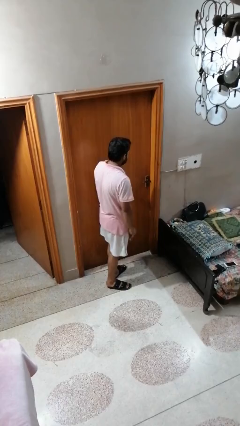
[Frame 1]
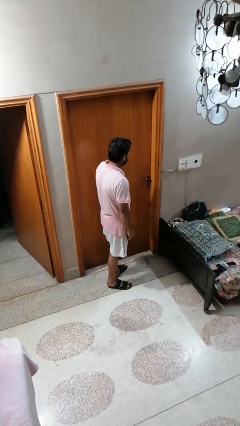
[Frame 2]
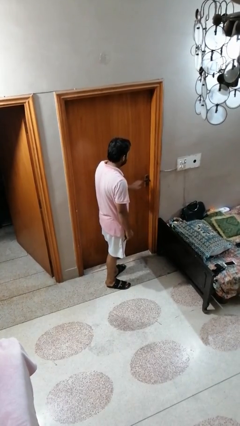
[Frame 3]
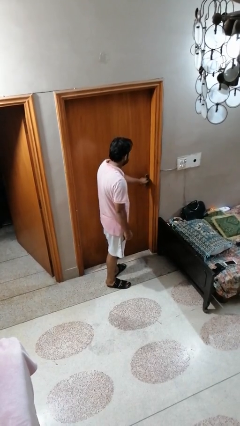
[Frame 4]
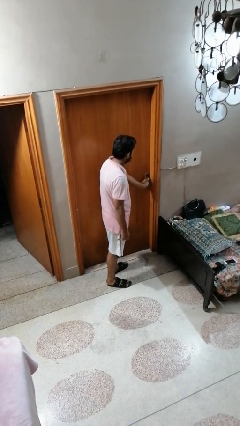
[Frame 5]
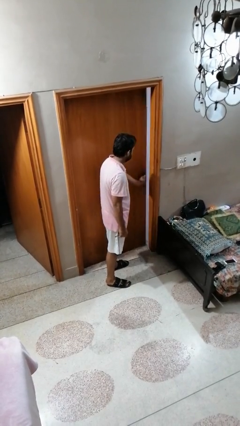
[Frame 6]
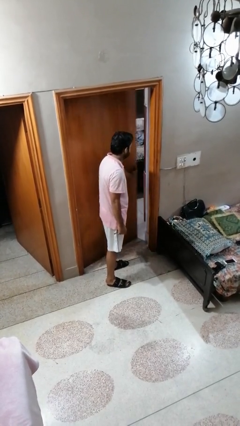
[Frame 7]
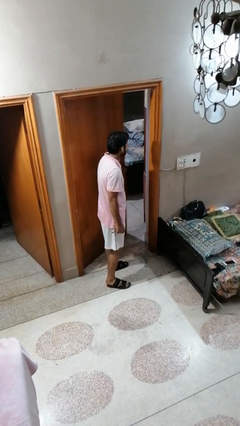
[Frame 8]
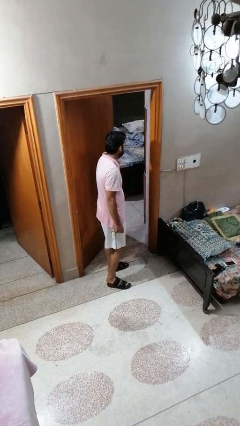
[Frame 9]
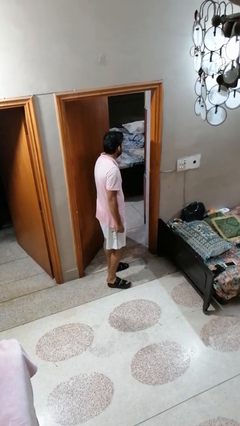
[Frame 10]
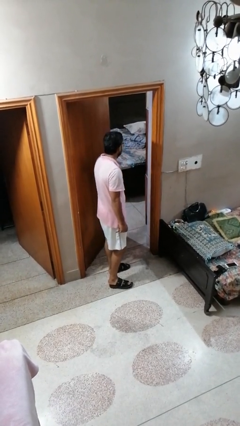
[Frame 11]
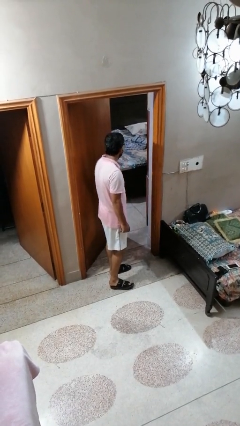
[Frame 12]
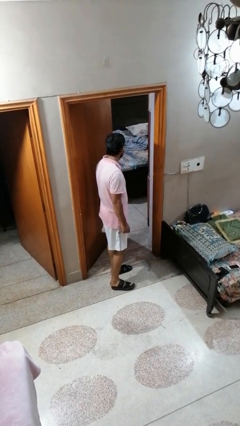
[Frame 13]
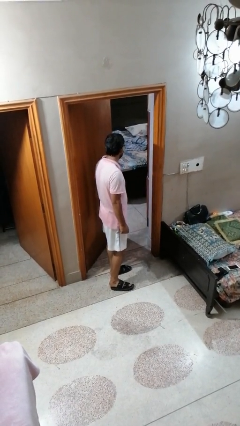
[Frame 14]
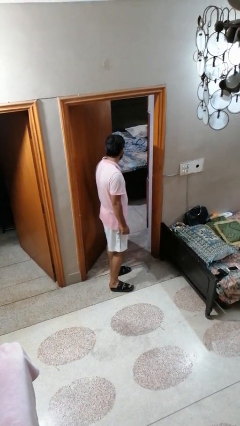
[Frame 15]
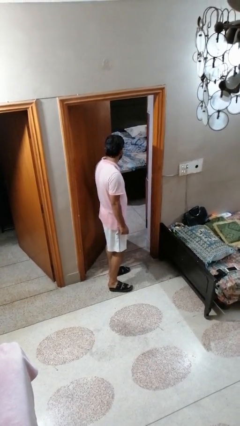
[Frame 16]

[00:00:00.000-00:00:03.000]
person opens facility door

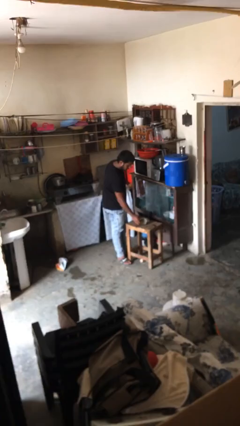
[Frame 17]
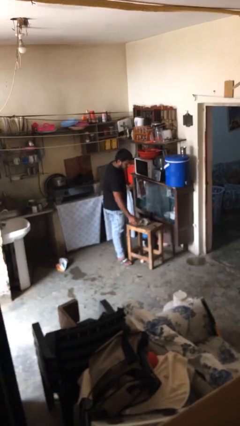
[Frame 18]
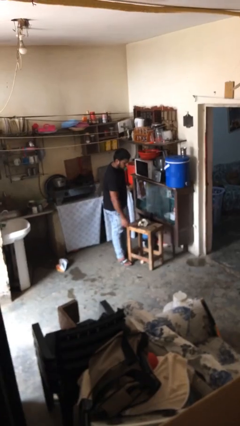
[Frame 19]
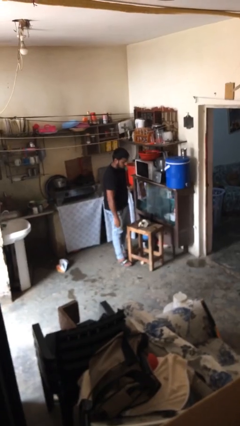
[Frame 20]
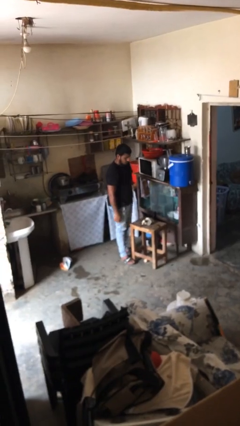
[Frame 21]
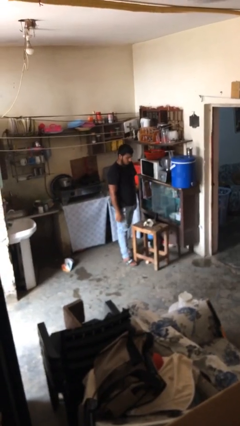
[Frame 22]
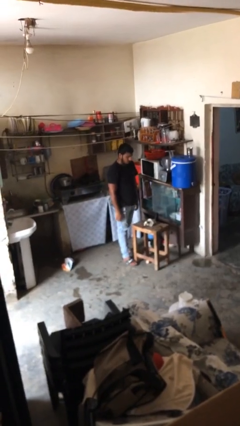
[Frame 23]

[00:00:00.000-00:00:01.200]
person puts down object on table

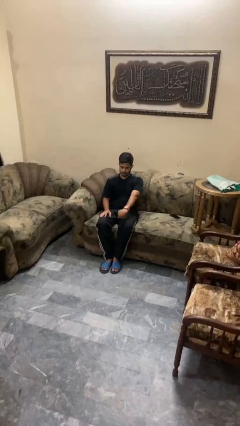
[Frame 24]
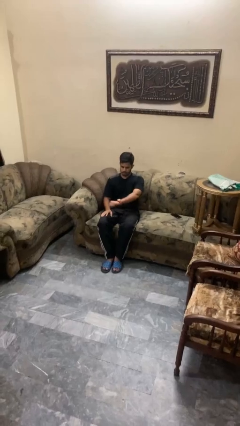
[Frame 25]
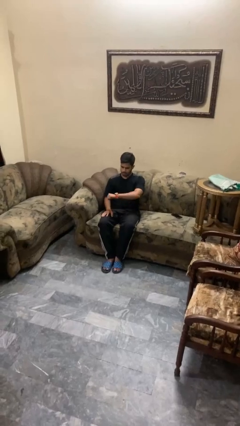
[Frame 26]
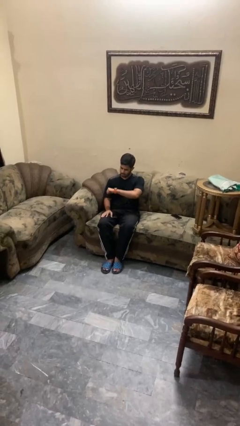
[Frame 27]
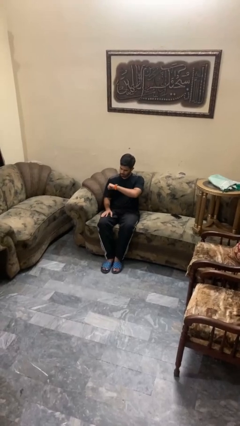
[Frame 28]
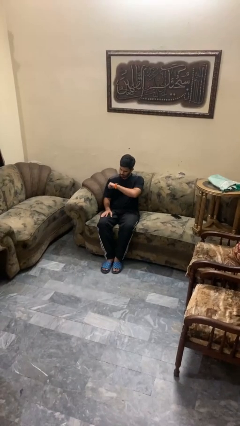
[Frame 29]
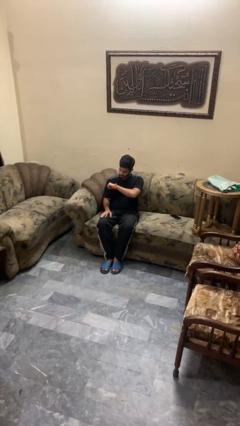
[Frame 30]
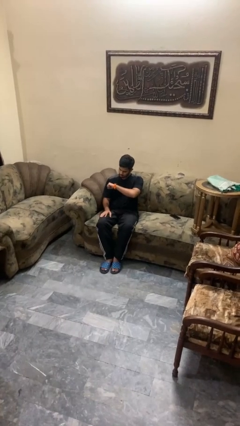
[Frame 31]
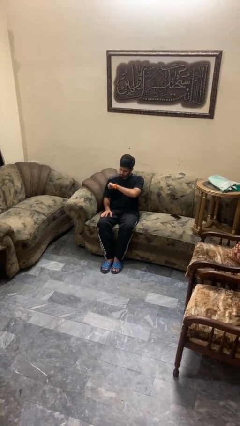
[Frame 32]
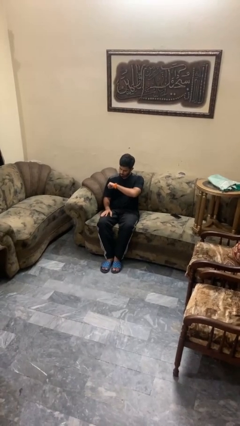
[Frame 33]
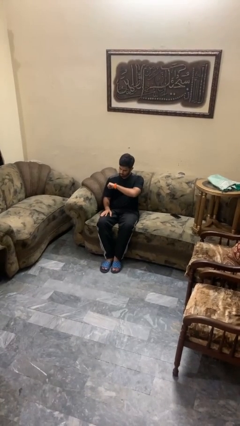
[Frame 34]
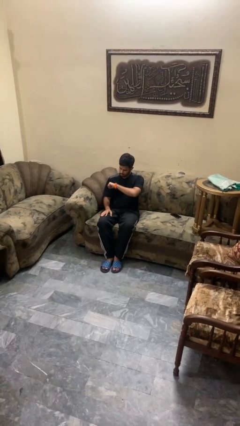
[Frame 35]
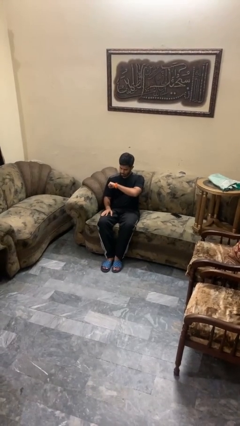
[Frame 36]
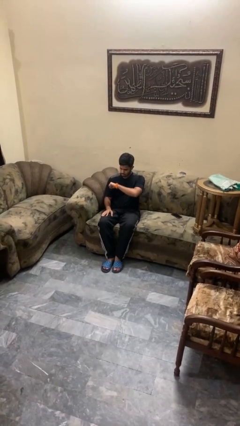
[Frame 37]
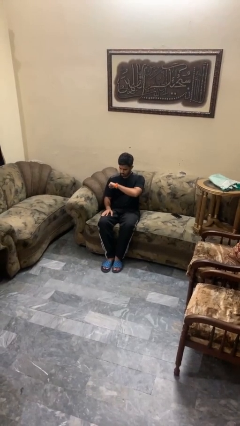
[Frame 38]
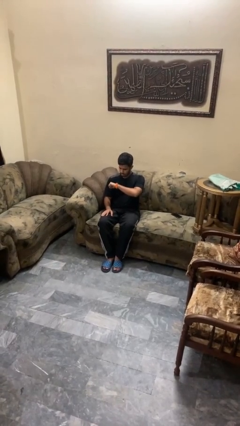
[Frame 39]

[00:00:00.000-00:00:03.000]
person looks at wristwatch

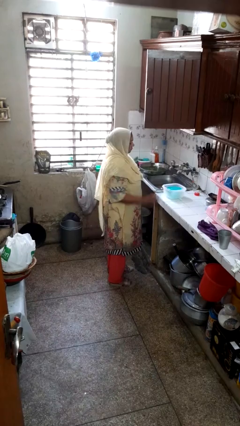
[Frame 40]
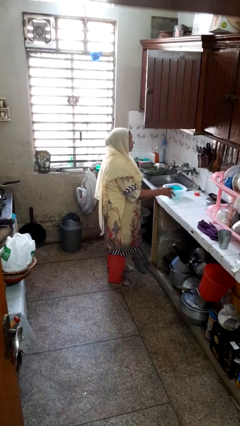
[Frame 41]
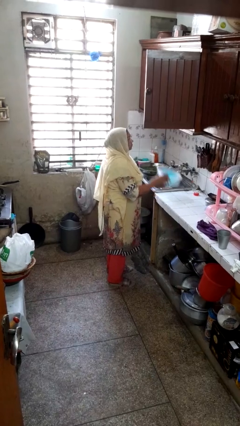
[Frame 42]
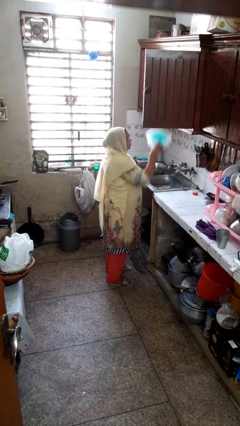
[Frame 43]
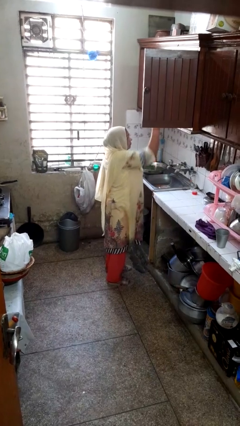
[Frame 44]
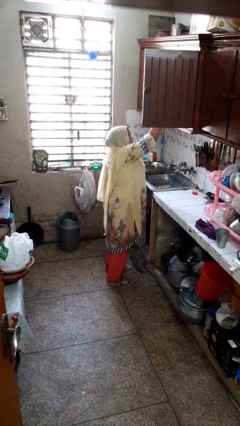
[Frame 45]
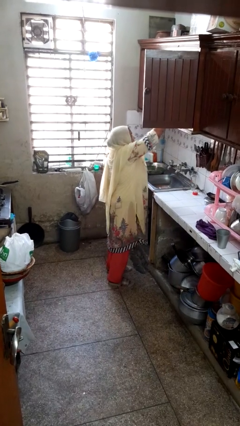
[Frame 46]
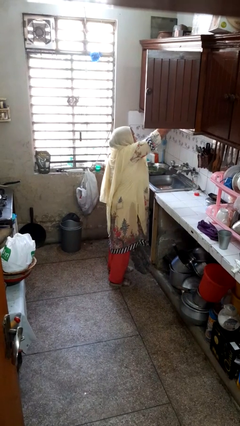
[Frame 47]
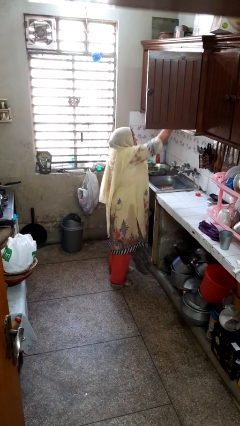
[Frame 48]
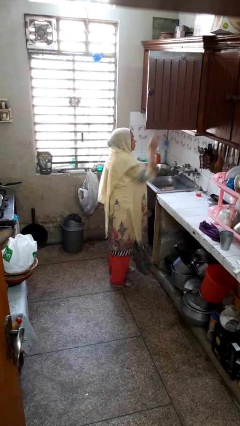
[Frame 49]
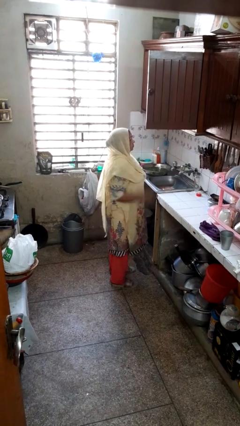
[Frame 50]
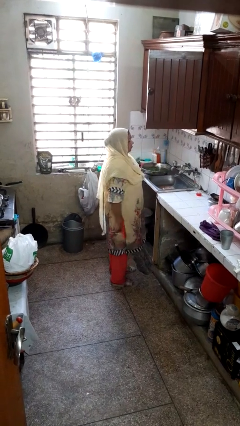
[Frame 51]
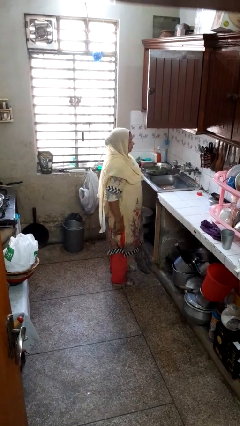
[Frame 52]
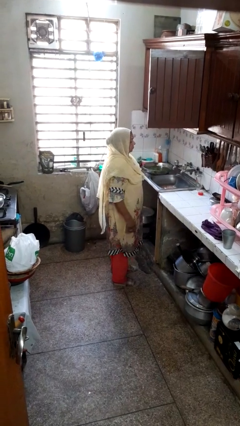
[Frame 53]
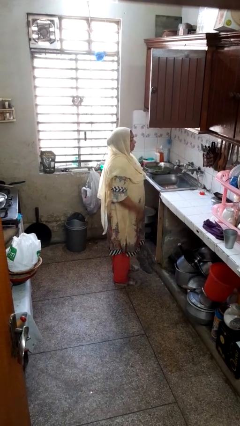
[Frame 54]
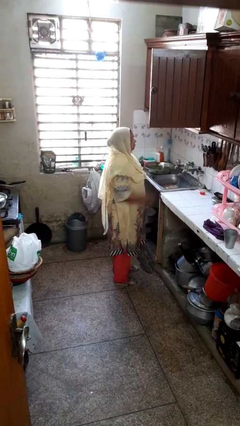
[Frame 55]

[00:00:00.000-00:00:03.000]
person puts object in cabinet

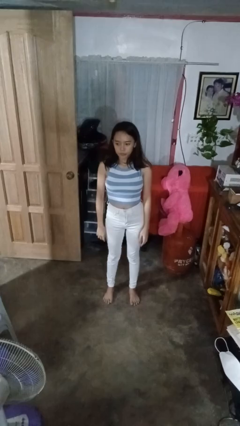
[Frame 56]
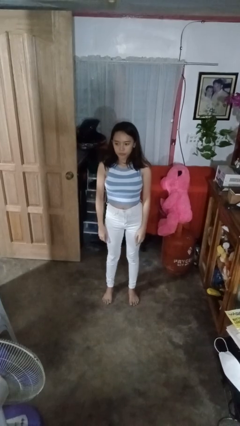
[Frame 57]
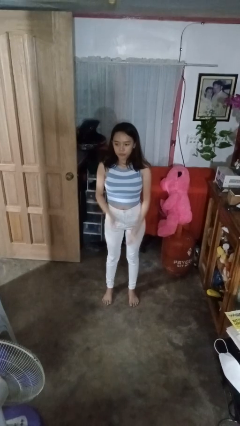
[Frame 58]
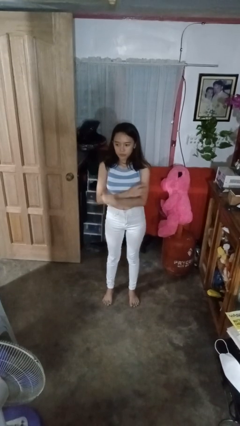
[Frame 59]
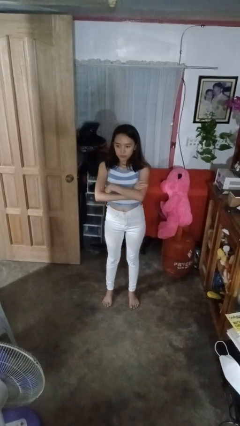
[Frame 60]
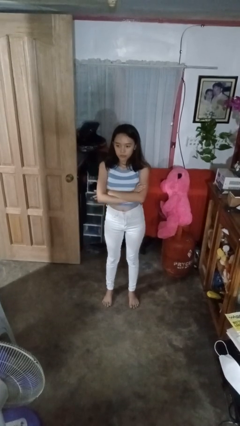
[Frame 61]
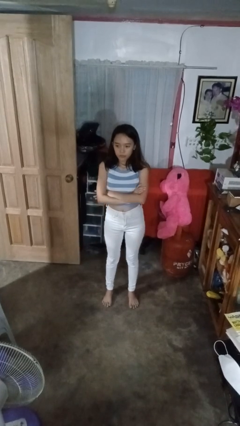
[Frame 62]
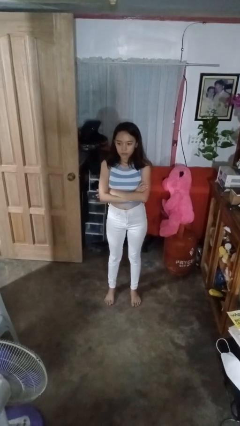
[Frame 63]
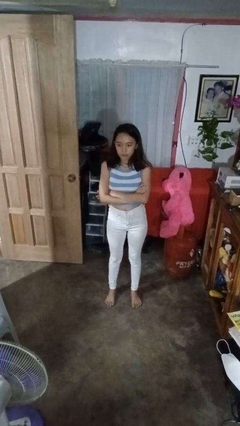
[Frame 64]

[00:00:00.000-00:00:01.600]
person crosses arms

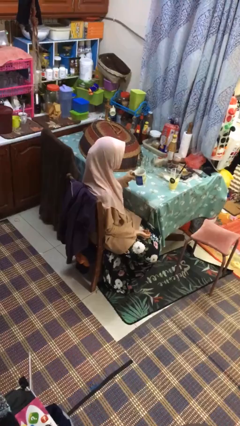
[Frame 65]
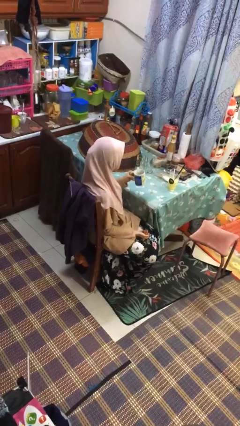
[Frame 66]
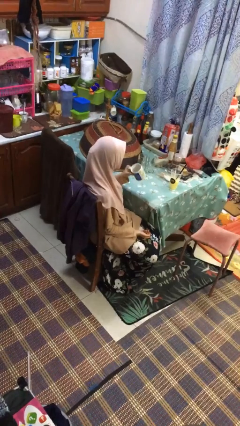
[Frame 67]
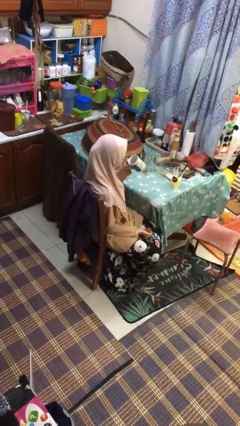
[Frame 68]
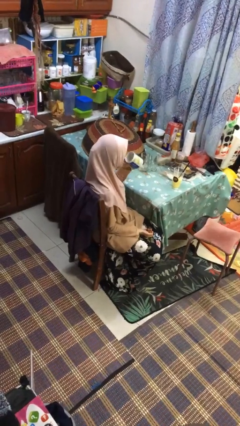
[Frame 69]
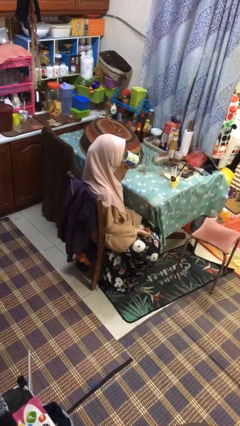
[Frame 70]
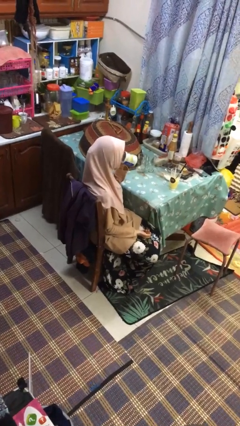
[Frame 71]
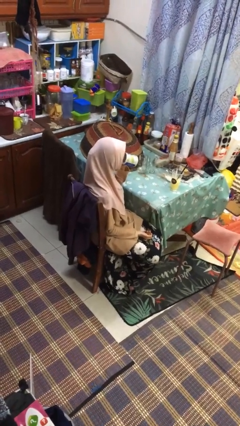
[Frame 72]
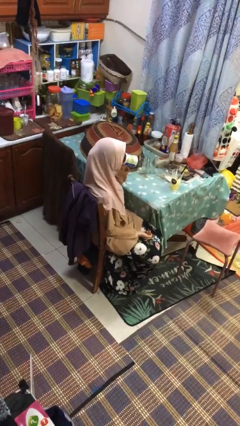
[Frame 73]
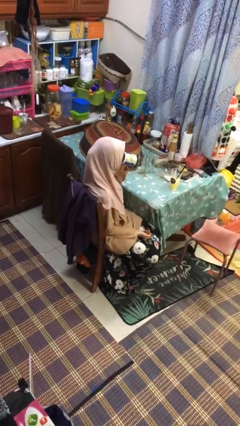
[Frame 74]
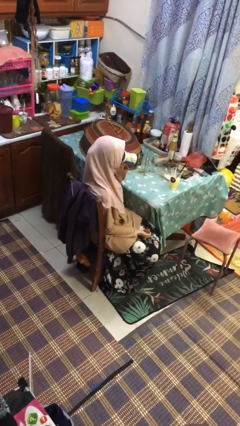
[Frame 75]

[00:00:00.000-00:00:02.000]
person drinks from mug

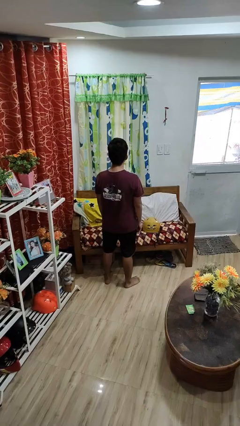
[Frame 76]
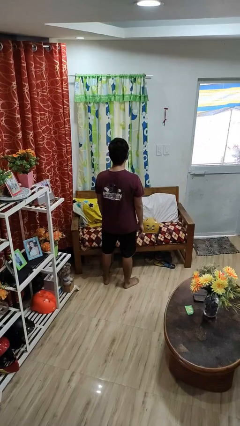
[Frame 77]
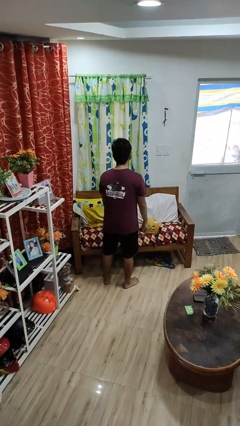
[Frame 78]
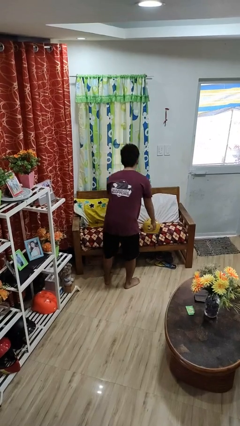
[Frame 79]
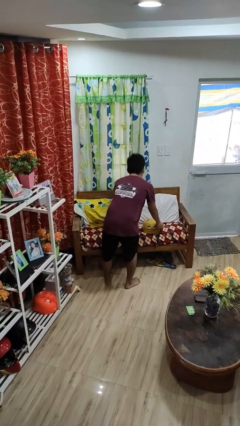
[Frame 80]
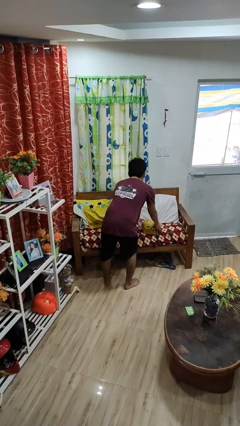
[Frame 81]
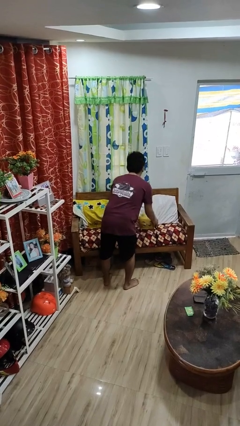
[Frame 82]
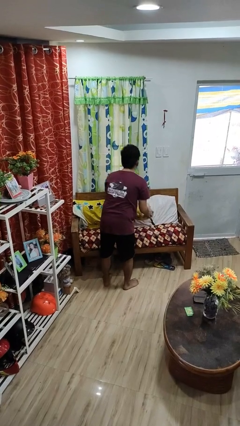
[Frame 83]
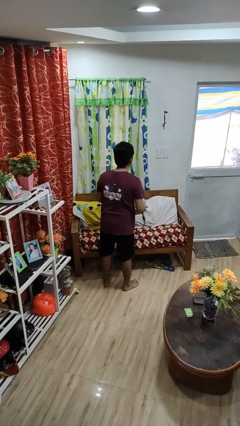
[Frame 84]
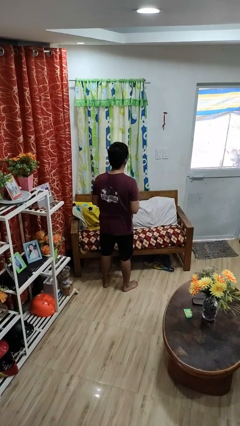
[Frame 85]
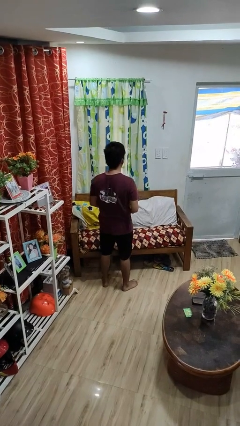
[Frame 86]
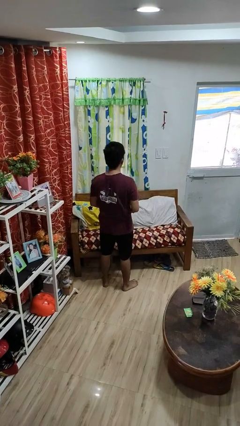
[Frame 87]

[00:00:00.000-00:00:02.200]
person picks up object from couch

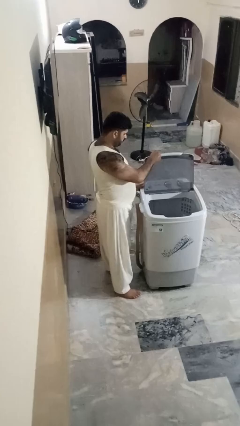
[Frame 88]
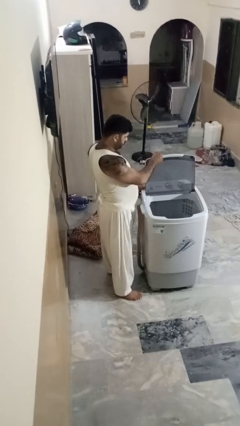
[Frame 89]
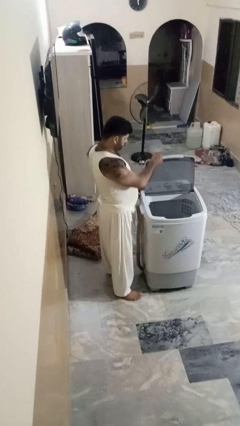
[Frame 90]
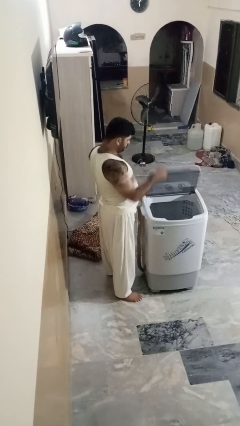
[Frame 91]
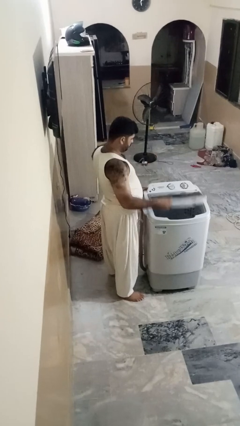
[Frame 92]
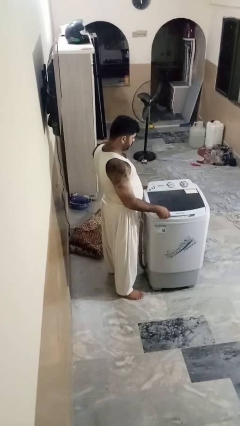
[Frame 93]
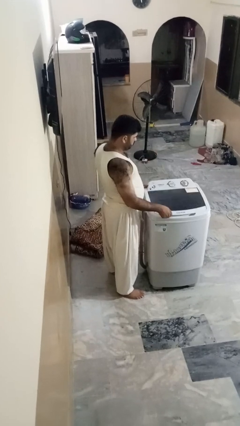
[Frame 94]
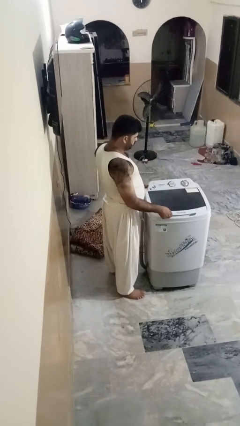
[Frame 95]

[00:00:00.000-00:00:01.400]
person closes clothes washer
